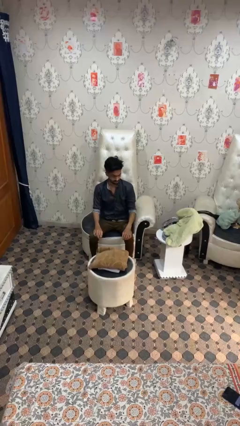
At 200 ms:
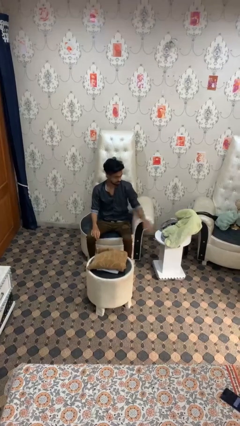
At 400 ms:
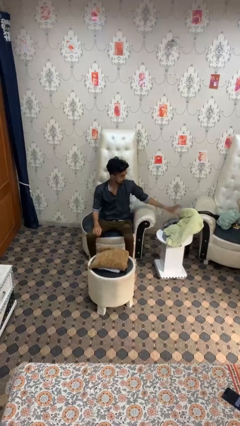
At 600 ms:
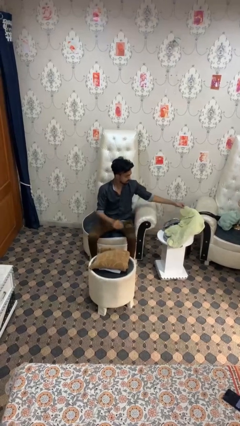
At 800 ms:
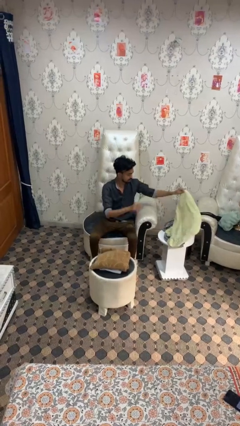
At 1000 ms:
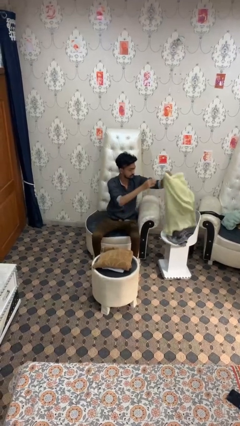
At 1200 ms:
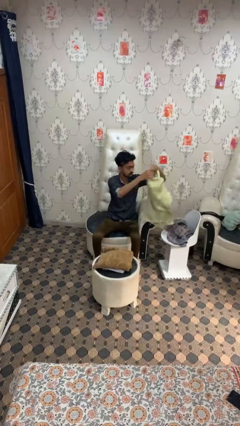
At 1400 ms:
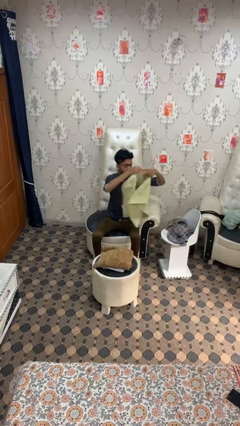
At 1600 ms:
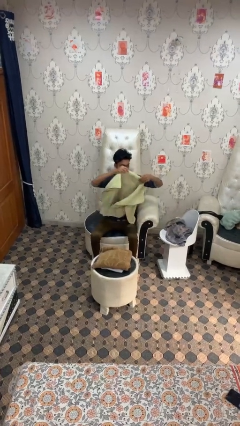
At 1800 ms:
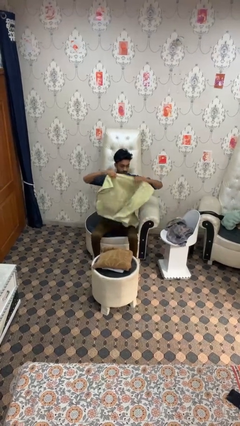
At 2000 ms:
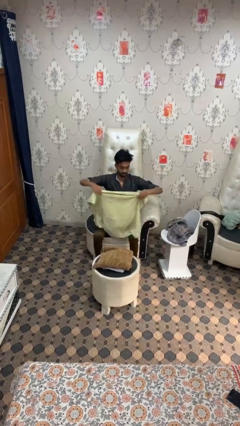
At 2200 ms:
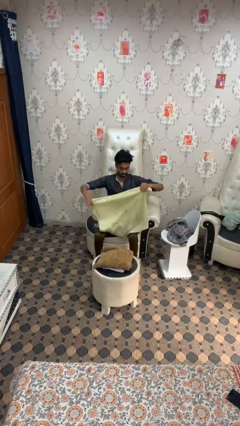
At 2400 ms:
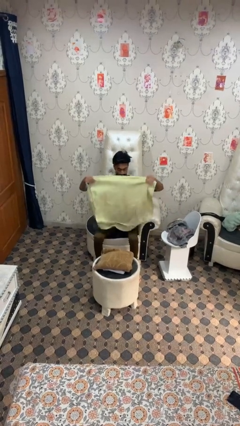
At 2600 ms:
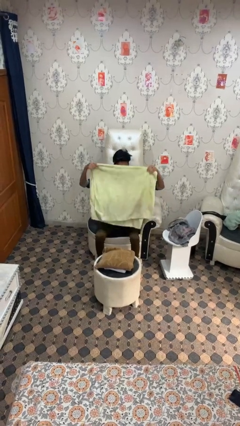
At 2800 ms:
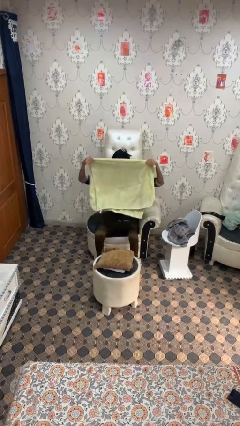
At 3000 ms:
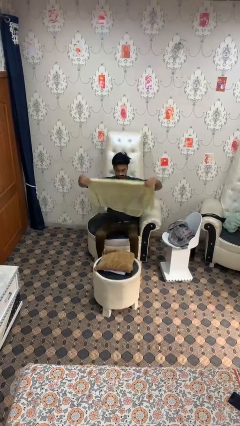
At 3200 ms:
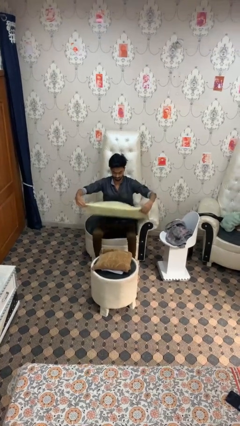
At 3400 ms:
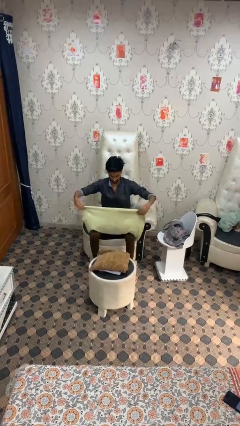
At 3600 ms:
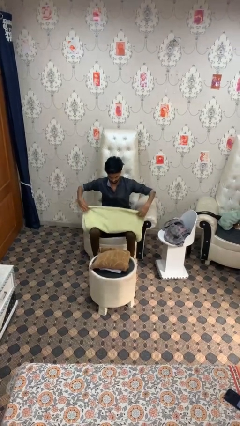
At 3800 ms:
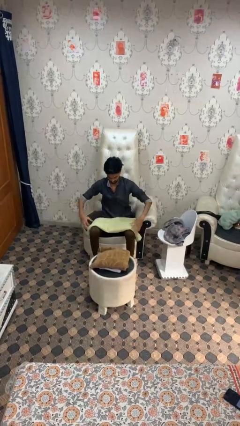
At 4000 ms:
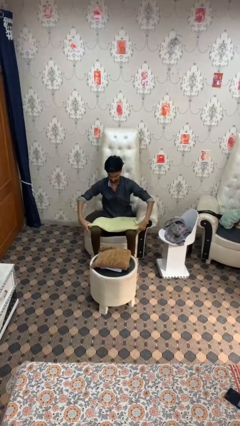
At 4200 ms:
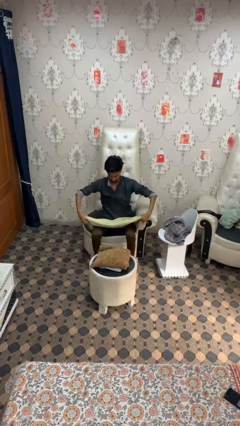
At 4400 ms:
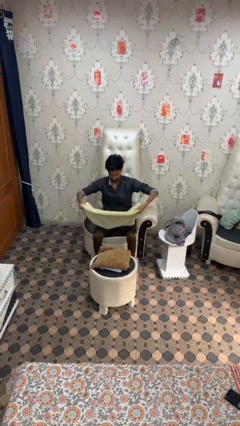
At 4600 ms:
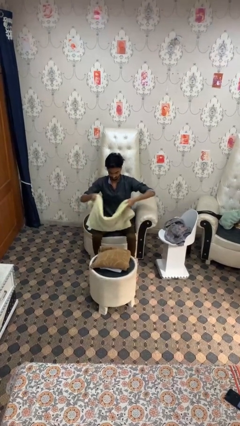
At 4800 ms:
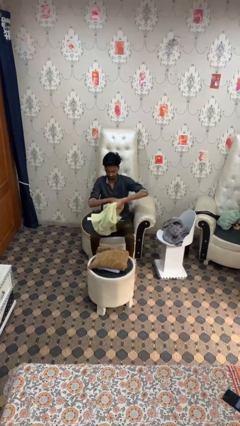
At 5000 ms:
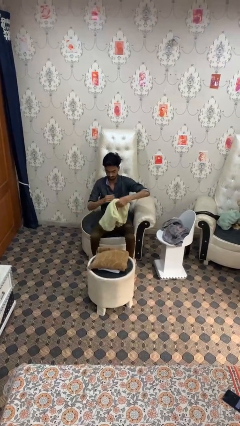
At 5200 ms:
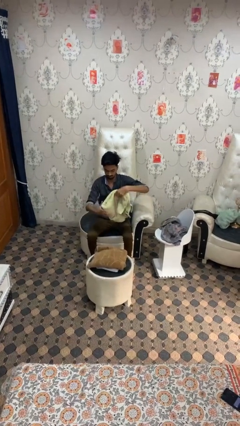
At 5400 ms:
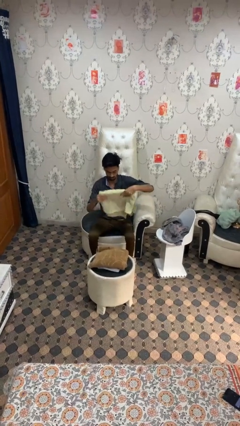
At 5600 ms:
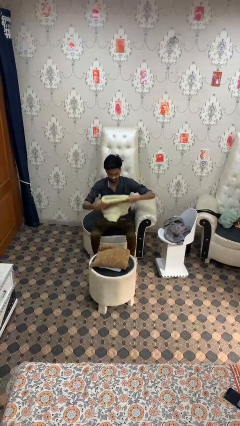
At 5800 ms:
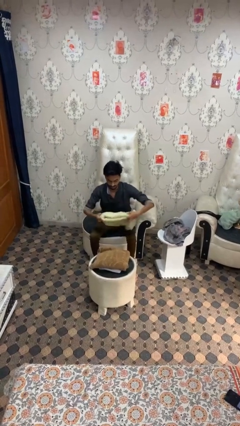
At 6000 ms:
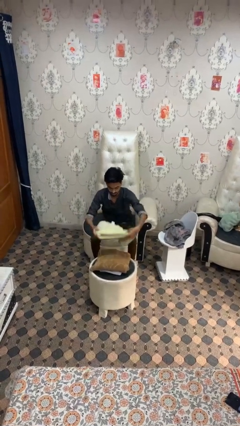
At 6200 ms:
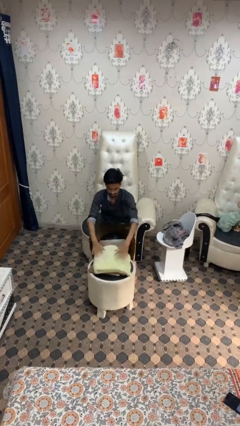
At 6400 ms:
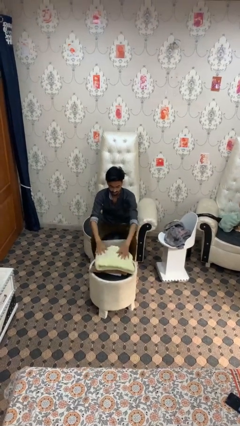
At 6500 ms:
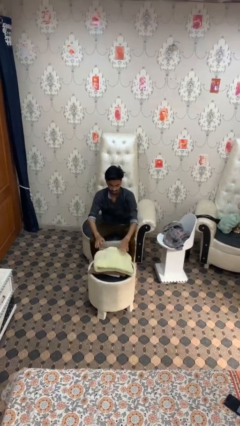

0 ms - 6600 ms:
person folds towel

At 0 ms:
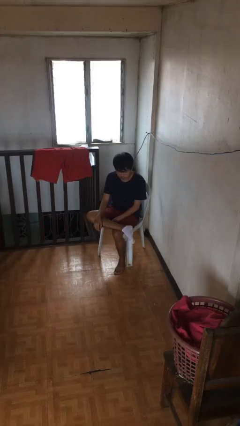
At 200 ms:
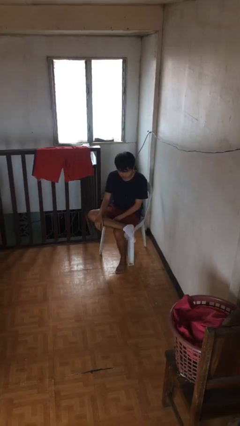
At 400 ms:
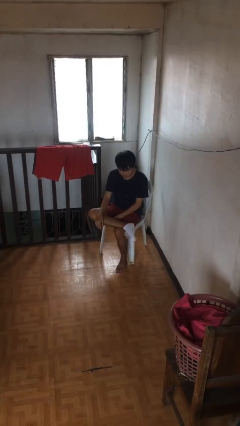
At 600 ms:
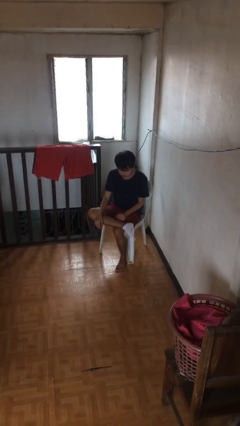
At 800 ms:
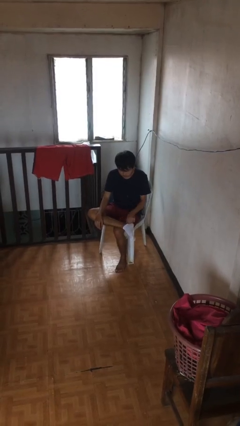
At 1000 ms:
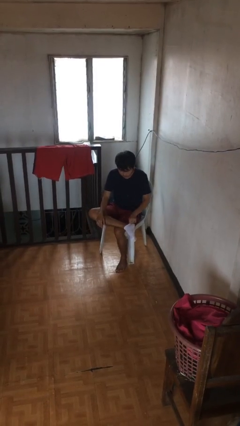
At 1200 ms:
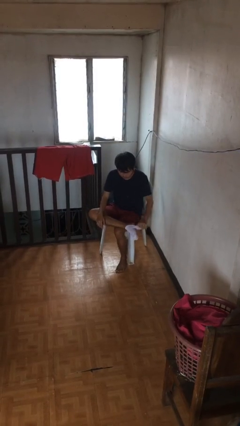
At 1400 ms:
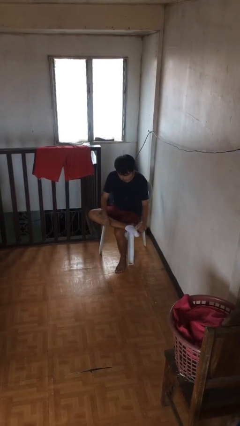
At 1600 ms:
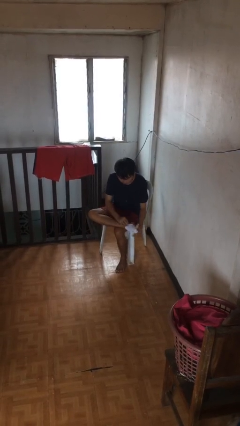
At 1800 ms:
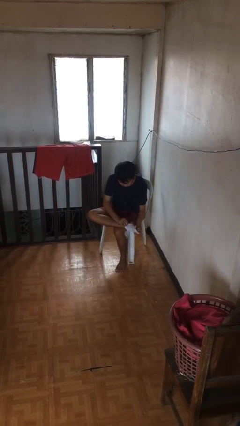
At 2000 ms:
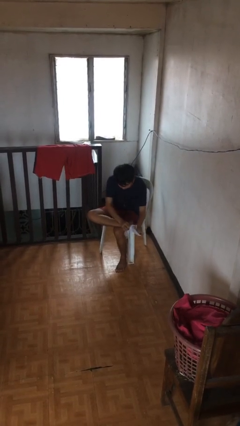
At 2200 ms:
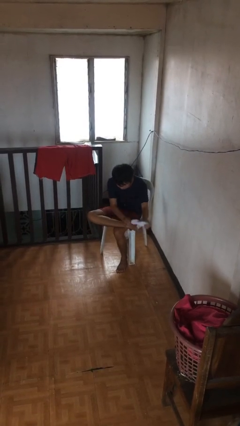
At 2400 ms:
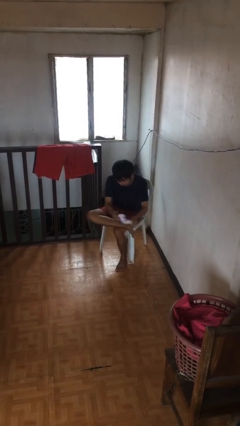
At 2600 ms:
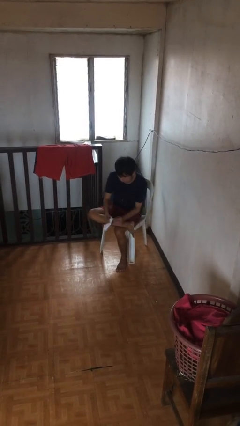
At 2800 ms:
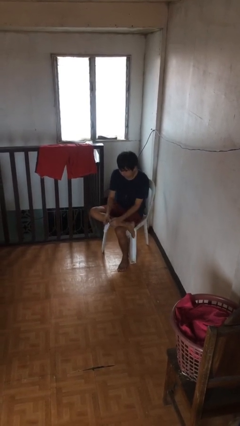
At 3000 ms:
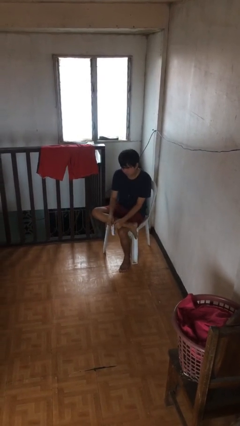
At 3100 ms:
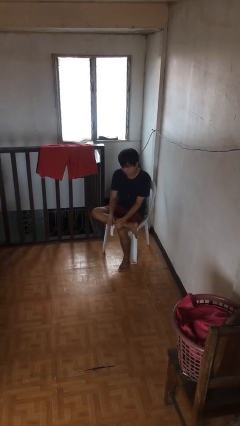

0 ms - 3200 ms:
person takes off socks

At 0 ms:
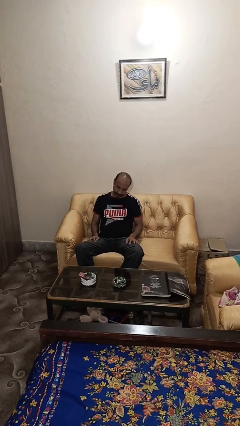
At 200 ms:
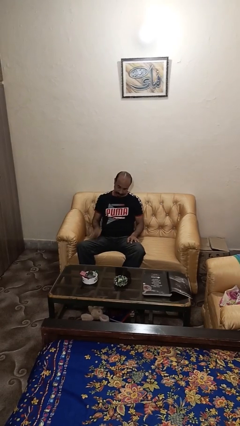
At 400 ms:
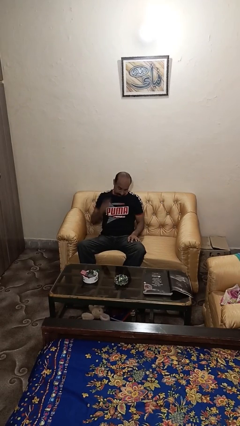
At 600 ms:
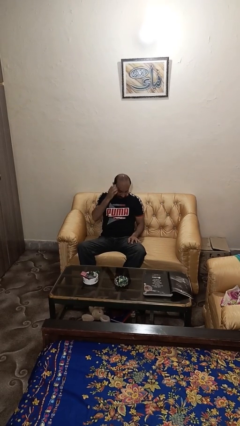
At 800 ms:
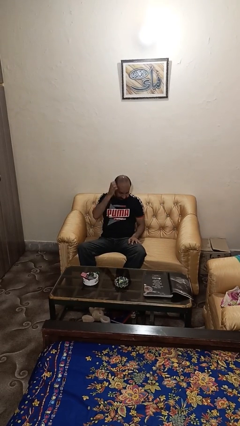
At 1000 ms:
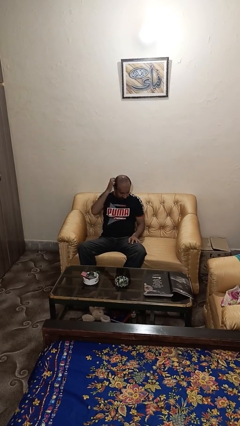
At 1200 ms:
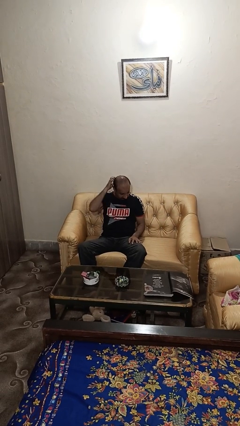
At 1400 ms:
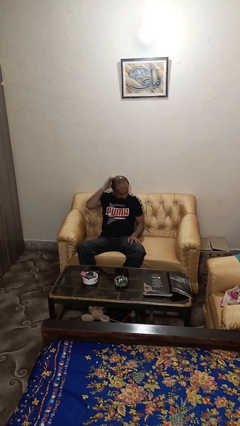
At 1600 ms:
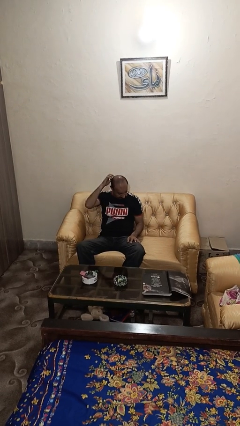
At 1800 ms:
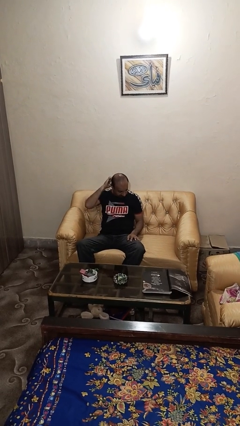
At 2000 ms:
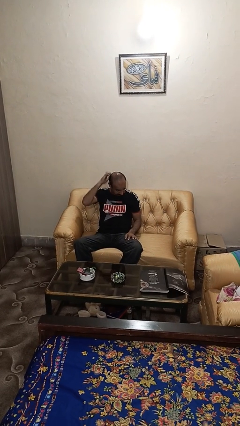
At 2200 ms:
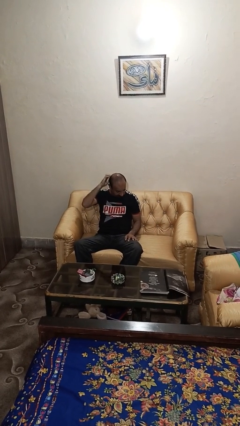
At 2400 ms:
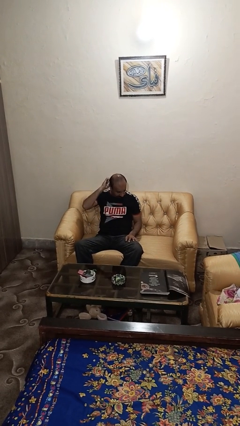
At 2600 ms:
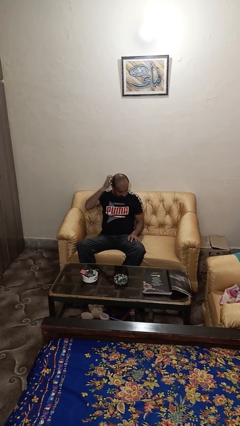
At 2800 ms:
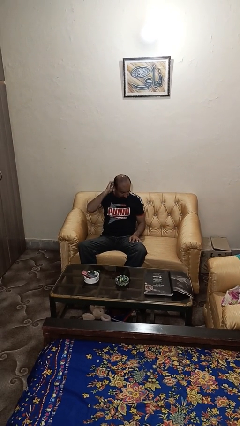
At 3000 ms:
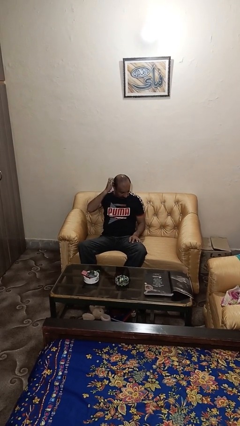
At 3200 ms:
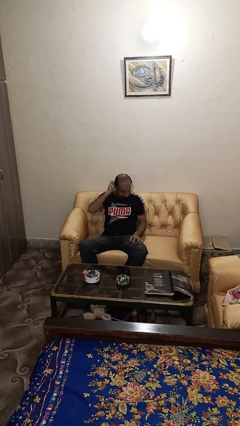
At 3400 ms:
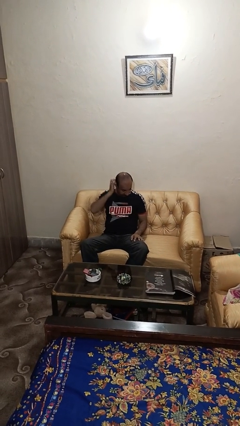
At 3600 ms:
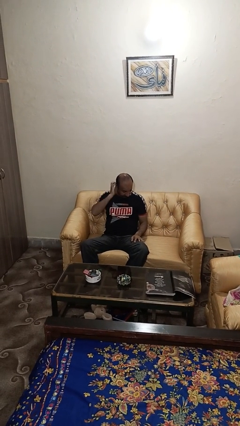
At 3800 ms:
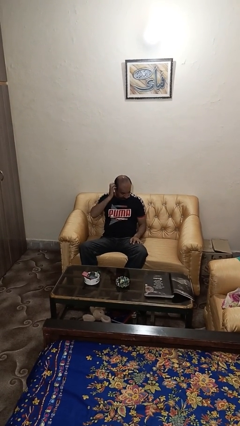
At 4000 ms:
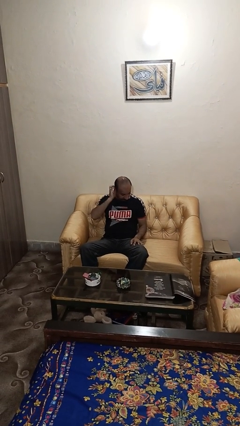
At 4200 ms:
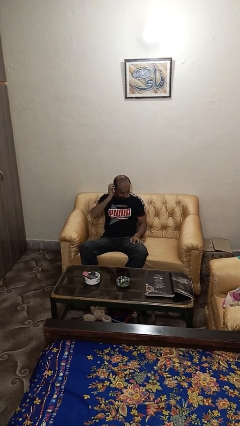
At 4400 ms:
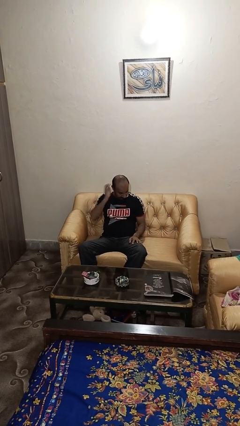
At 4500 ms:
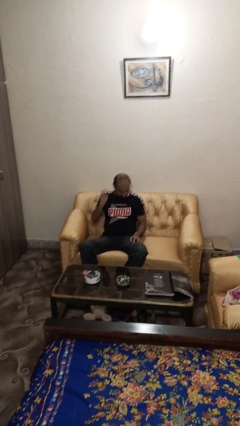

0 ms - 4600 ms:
person strokes hair

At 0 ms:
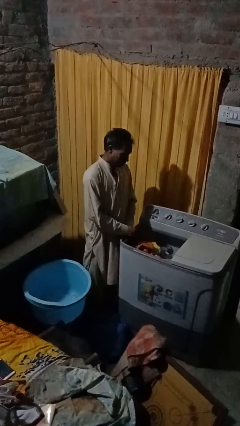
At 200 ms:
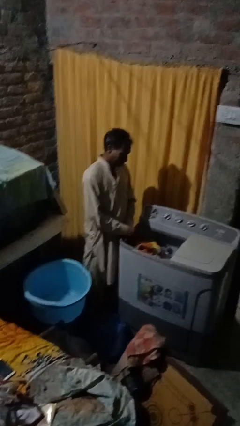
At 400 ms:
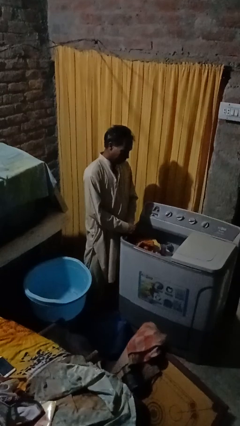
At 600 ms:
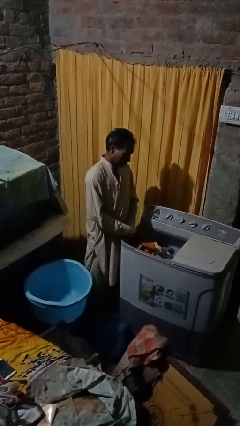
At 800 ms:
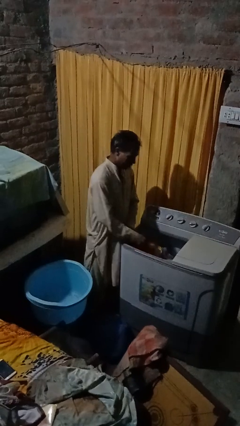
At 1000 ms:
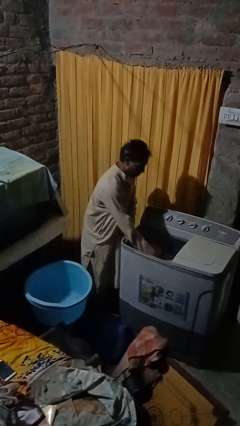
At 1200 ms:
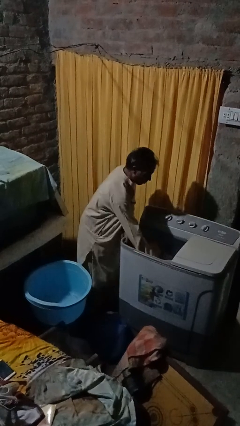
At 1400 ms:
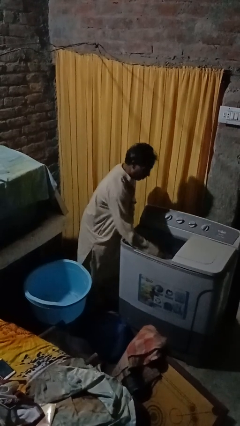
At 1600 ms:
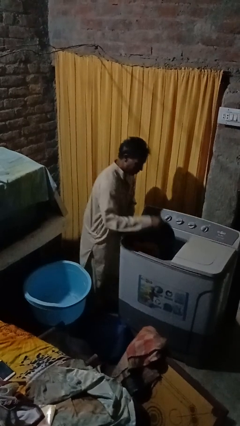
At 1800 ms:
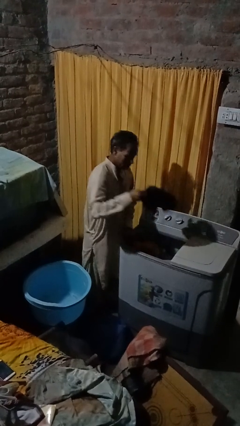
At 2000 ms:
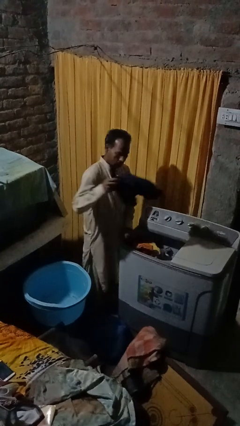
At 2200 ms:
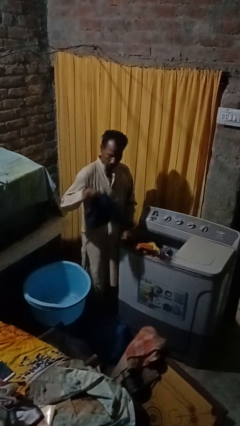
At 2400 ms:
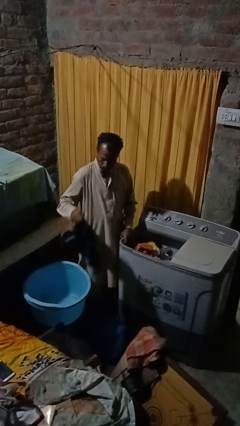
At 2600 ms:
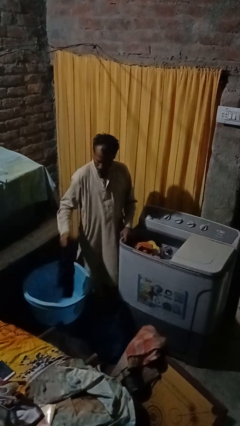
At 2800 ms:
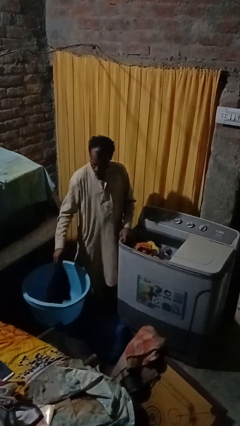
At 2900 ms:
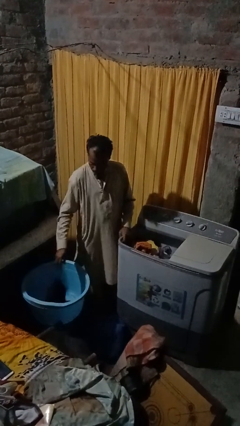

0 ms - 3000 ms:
person unloads clotheswasher
